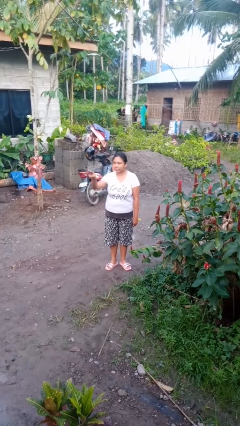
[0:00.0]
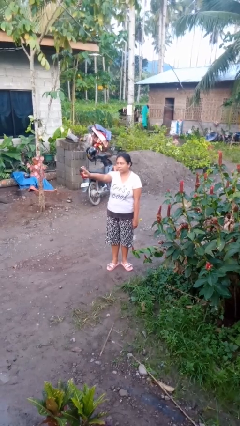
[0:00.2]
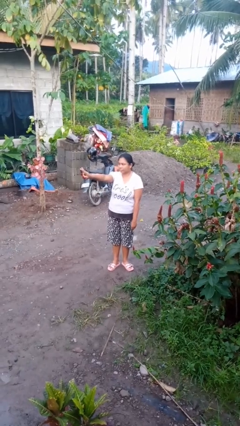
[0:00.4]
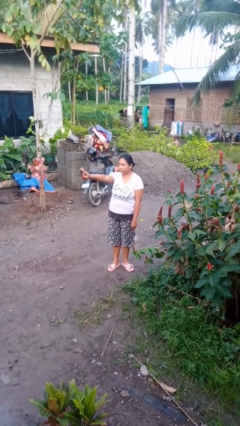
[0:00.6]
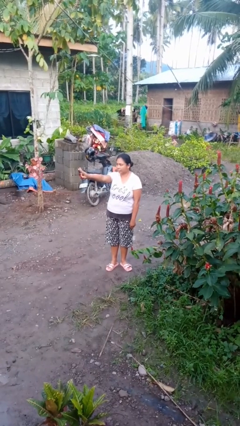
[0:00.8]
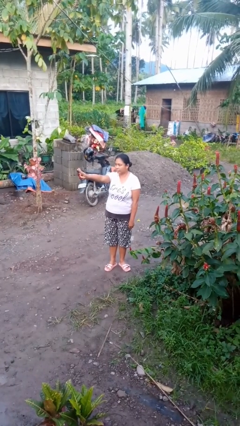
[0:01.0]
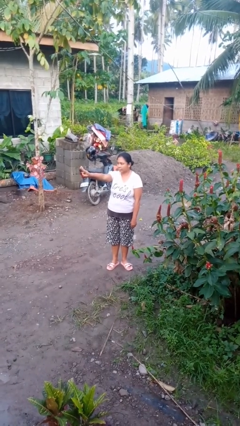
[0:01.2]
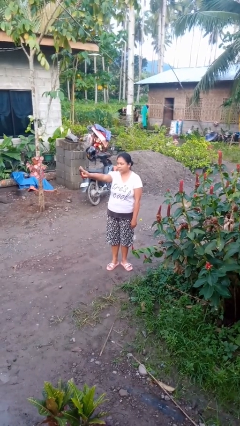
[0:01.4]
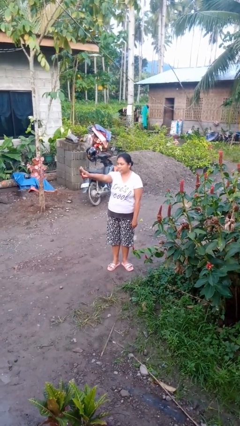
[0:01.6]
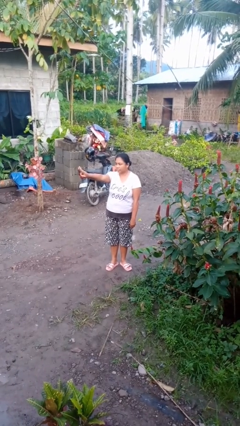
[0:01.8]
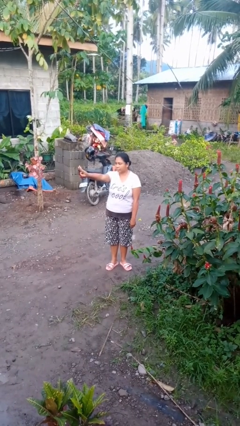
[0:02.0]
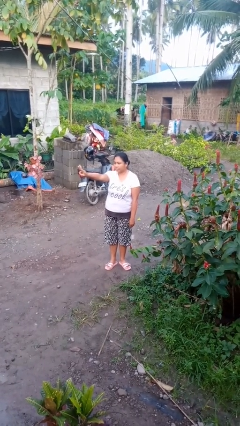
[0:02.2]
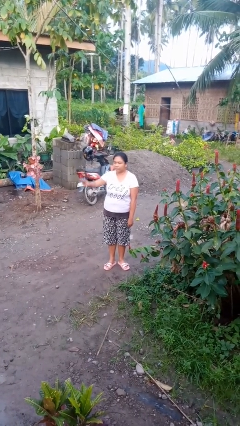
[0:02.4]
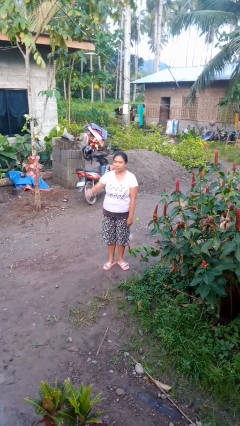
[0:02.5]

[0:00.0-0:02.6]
person gestures number three

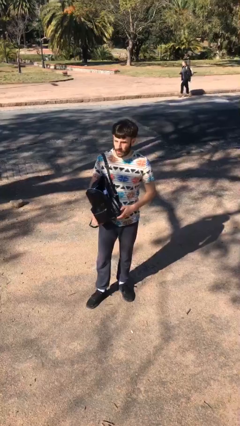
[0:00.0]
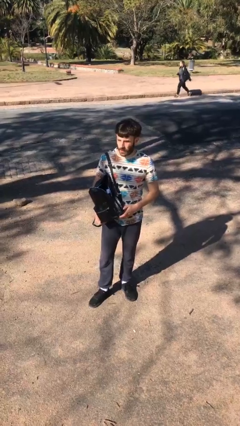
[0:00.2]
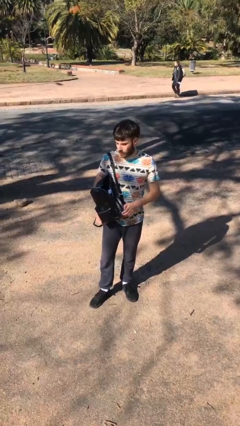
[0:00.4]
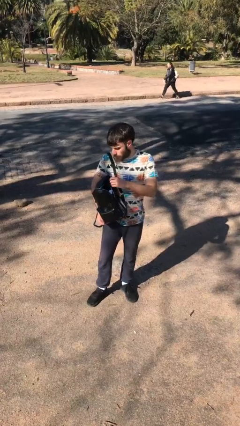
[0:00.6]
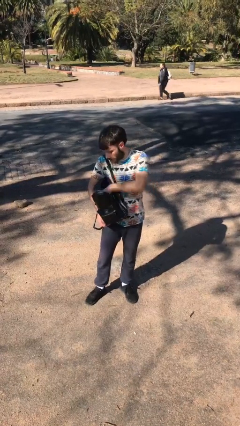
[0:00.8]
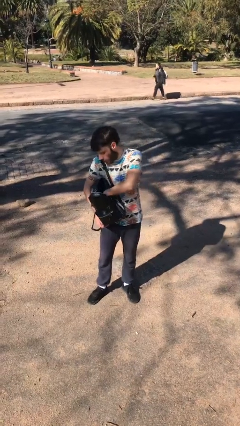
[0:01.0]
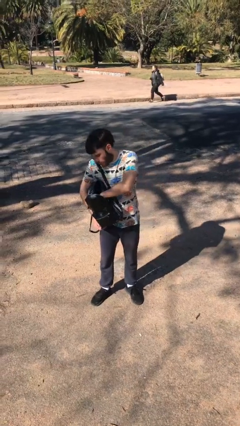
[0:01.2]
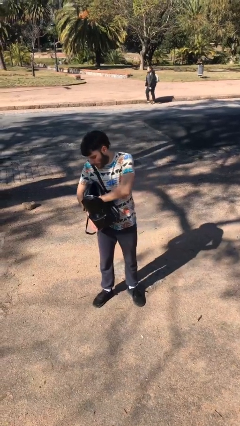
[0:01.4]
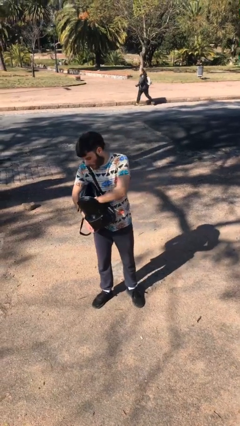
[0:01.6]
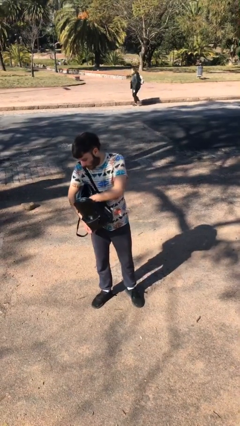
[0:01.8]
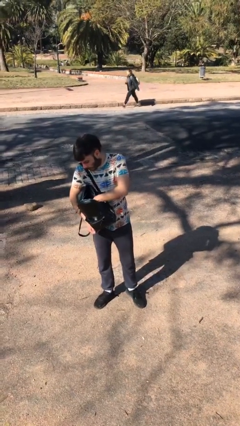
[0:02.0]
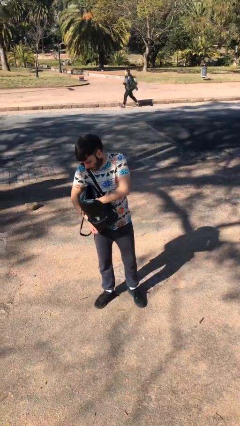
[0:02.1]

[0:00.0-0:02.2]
person searches in backpack

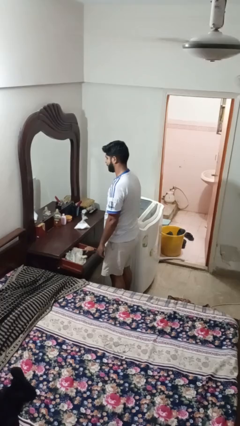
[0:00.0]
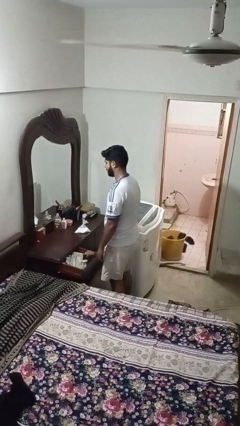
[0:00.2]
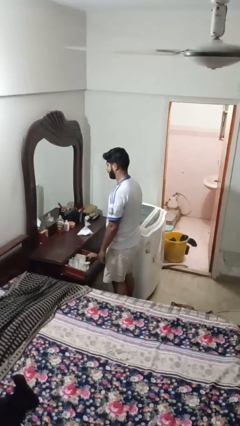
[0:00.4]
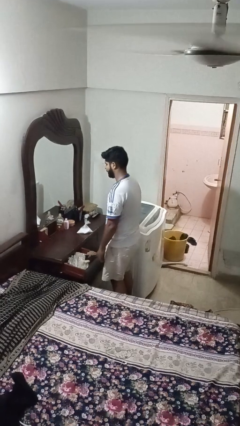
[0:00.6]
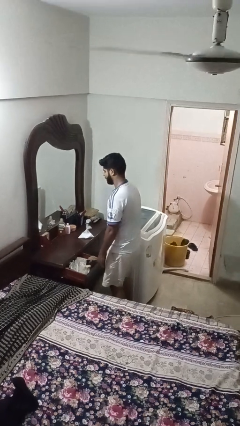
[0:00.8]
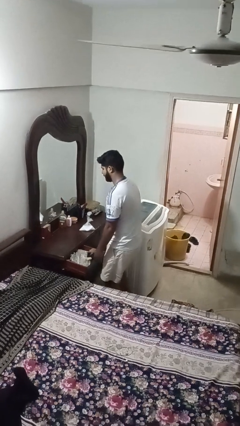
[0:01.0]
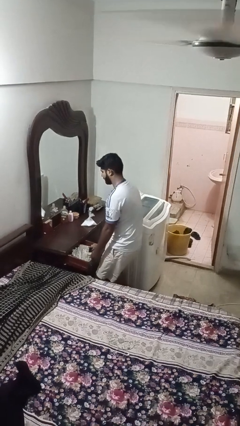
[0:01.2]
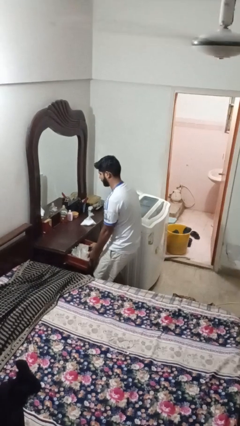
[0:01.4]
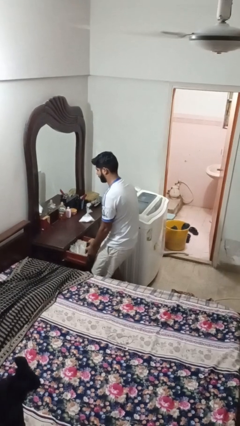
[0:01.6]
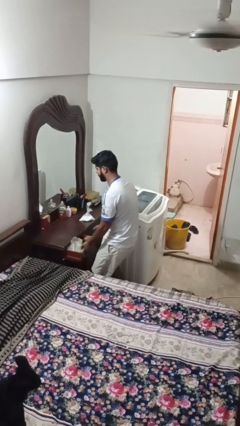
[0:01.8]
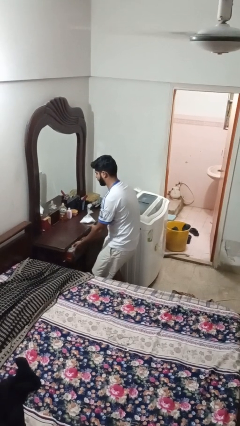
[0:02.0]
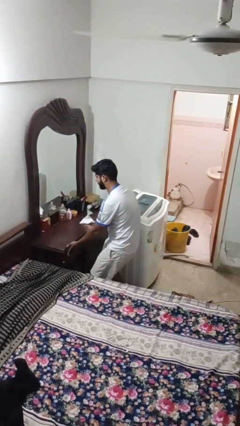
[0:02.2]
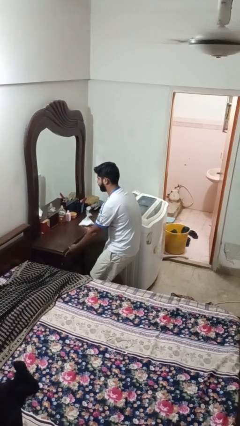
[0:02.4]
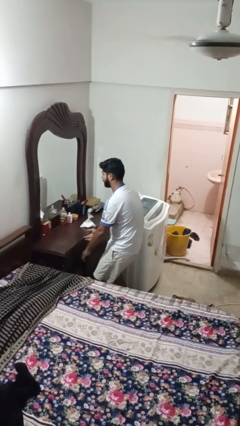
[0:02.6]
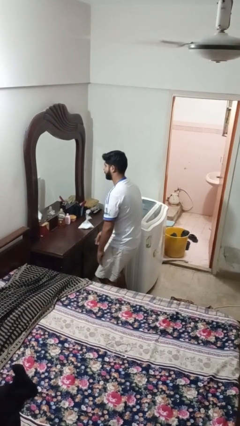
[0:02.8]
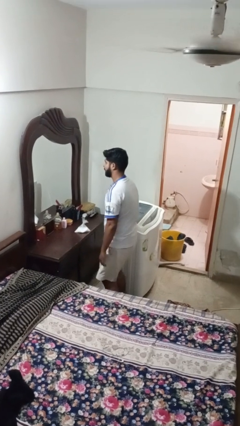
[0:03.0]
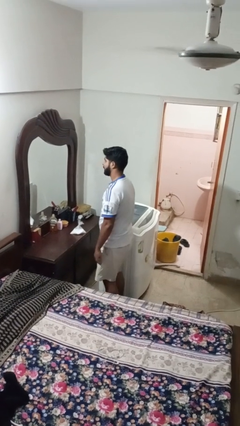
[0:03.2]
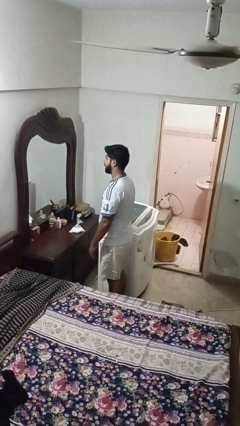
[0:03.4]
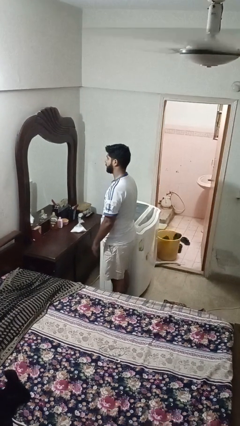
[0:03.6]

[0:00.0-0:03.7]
person closes dresser drawer

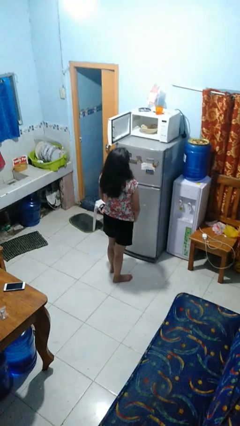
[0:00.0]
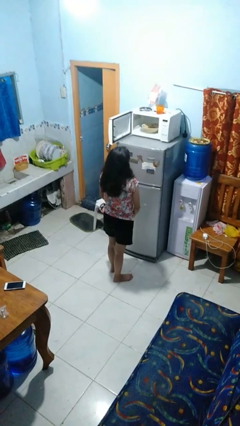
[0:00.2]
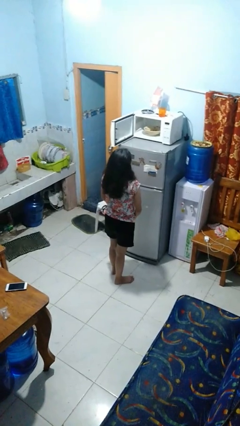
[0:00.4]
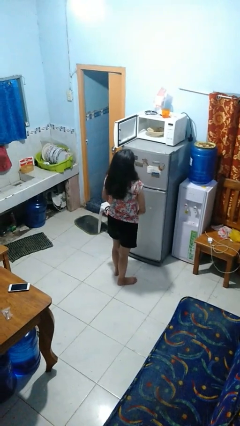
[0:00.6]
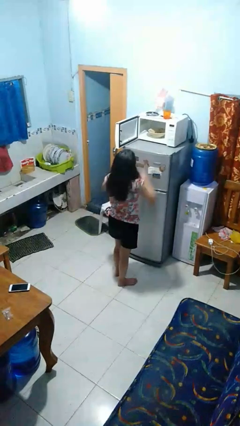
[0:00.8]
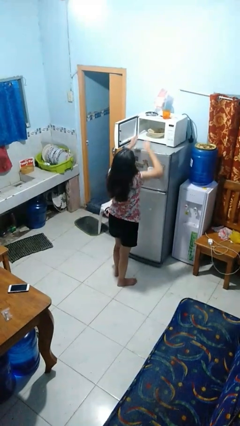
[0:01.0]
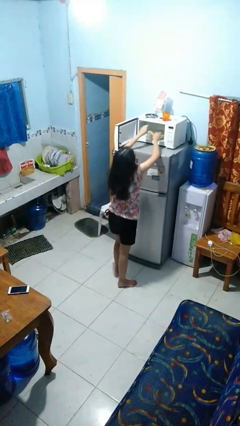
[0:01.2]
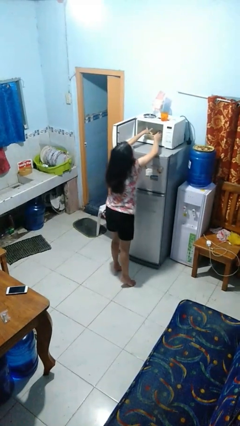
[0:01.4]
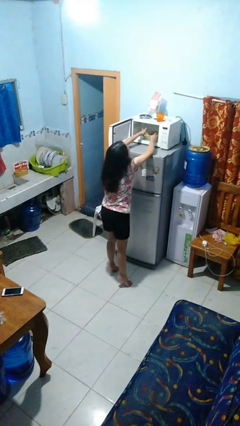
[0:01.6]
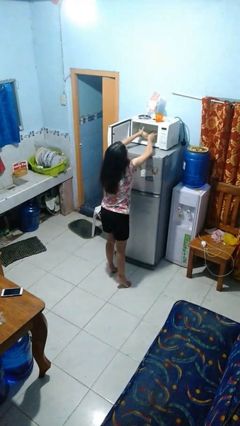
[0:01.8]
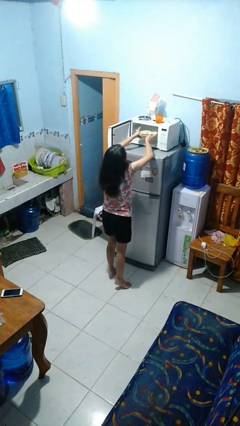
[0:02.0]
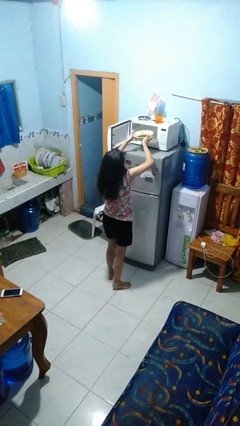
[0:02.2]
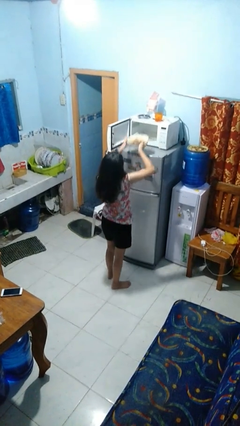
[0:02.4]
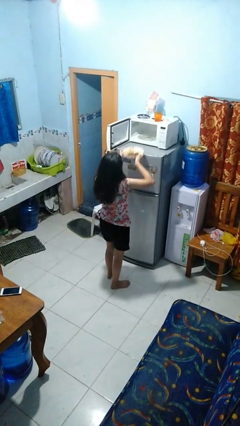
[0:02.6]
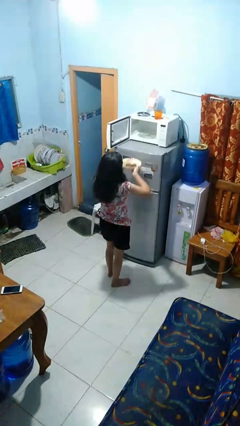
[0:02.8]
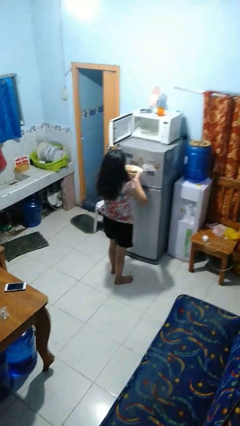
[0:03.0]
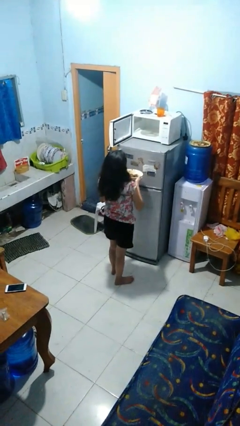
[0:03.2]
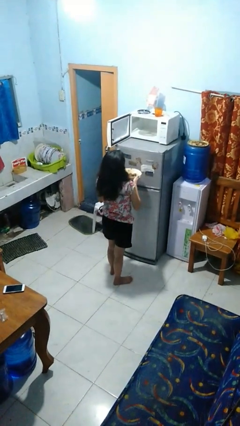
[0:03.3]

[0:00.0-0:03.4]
person takes object from microwave

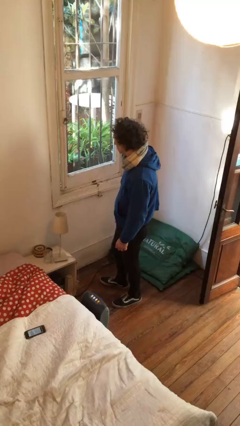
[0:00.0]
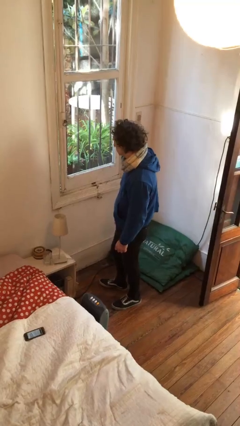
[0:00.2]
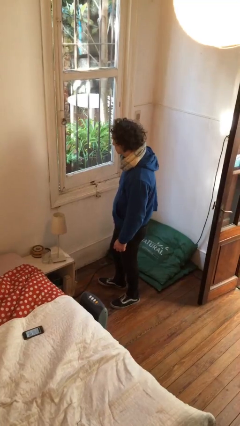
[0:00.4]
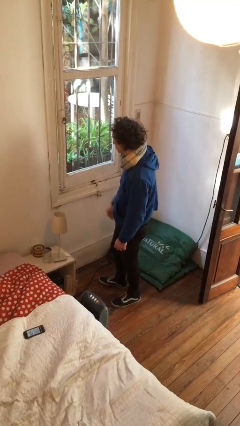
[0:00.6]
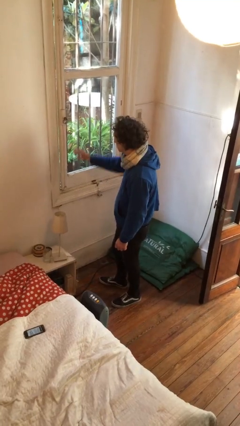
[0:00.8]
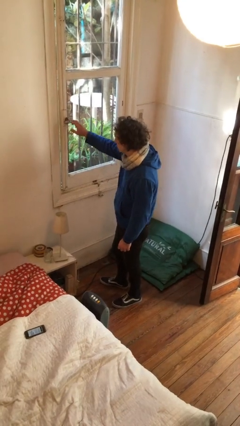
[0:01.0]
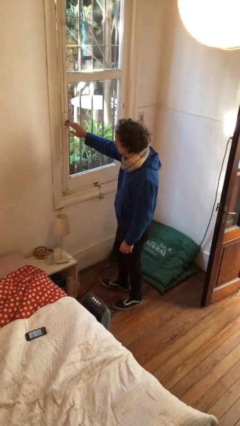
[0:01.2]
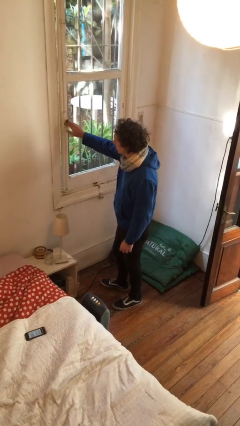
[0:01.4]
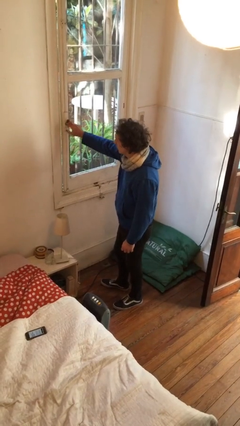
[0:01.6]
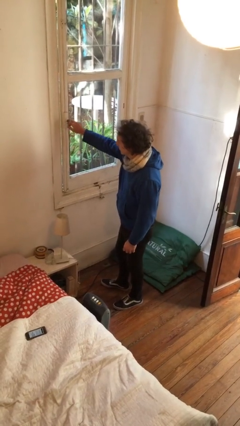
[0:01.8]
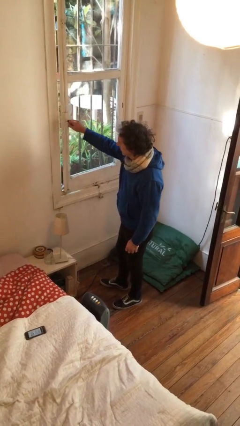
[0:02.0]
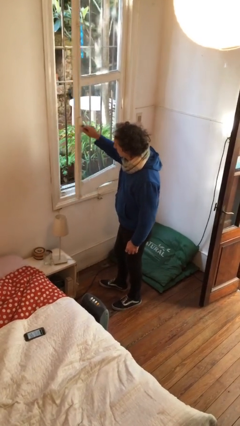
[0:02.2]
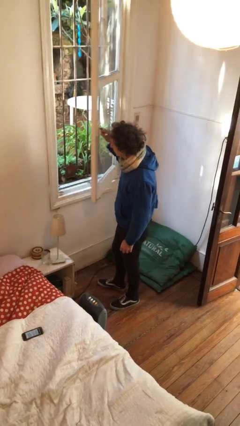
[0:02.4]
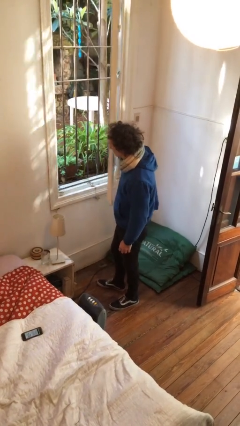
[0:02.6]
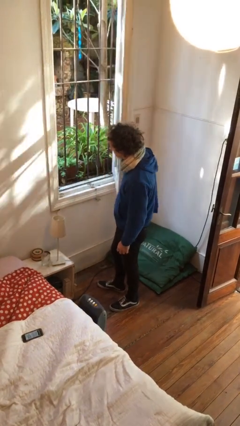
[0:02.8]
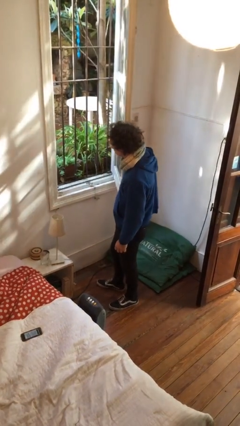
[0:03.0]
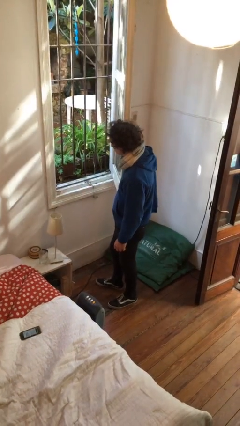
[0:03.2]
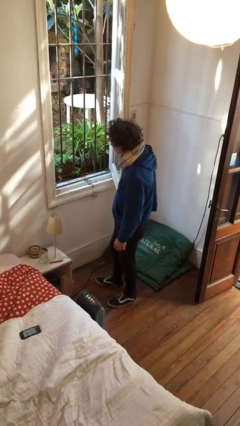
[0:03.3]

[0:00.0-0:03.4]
person opens home window

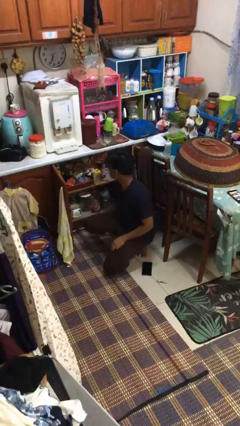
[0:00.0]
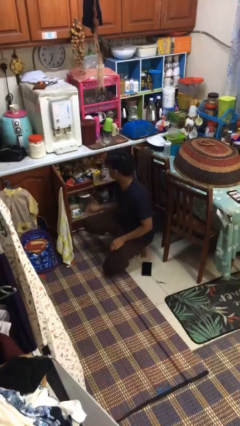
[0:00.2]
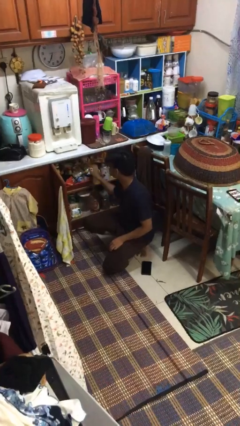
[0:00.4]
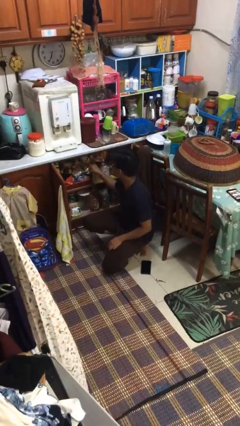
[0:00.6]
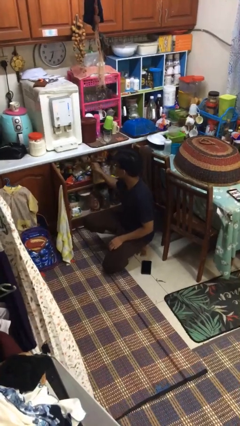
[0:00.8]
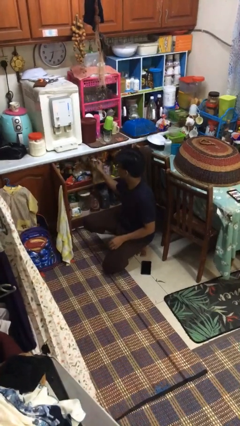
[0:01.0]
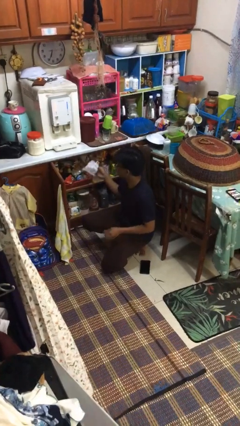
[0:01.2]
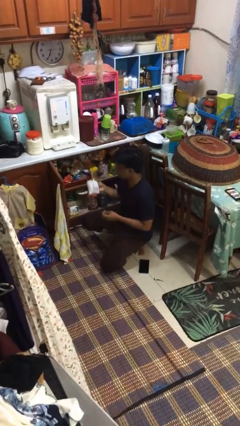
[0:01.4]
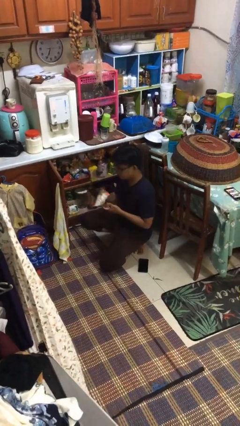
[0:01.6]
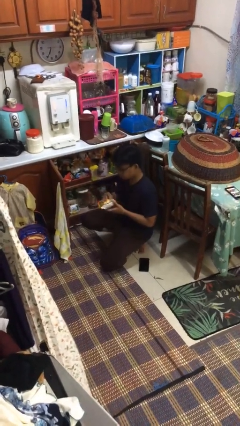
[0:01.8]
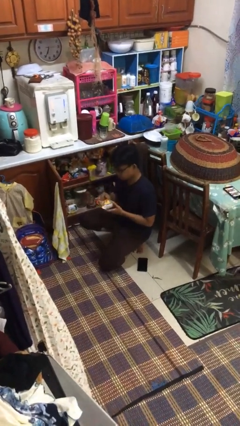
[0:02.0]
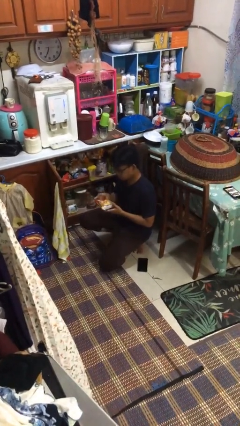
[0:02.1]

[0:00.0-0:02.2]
person takes object from cabinet
